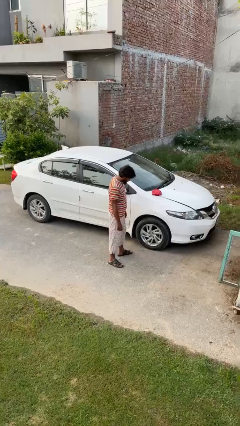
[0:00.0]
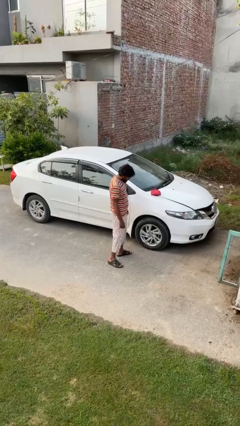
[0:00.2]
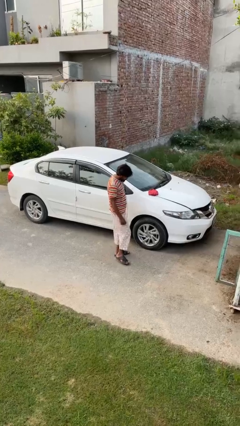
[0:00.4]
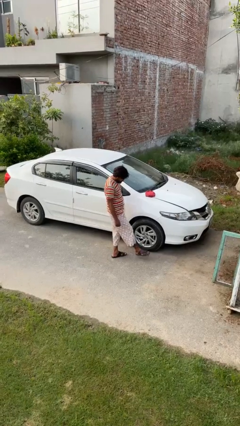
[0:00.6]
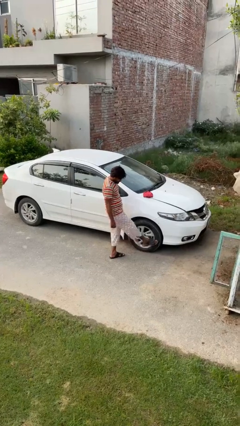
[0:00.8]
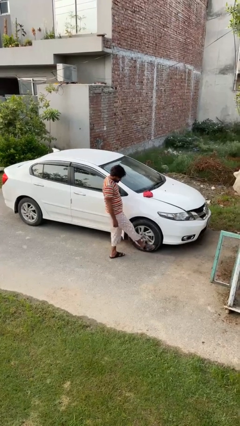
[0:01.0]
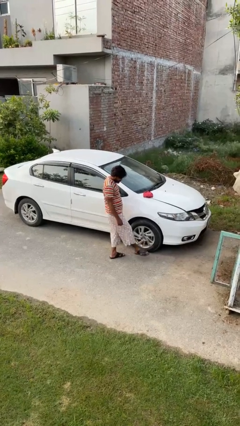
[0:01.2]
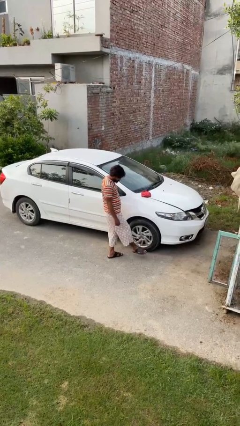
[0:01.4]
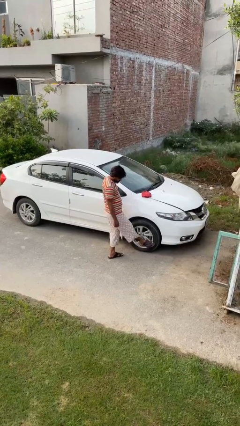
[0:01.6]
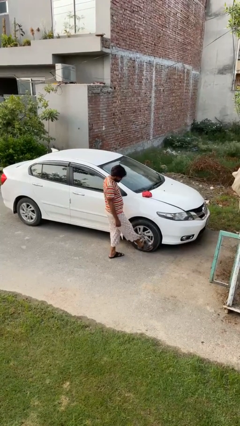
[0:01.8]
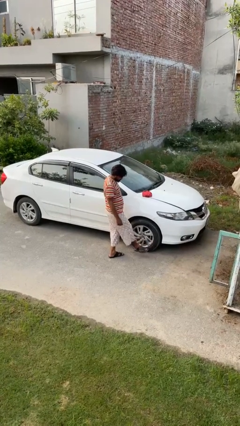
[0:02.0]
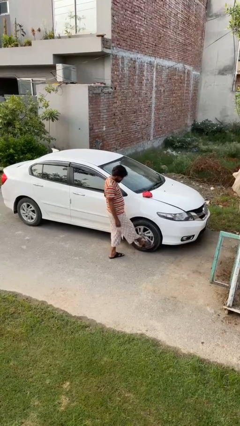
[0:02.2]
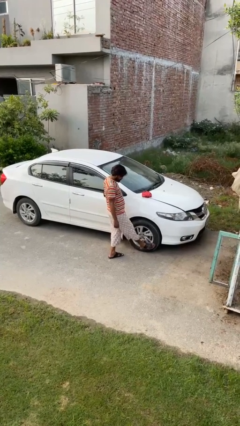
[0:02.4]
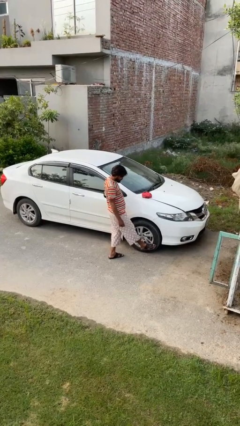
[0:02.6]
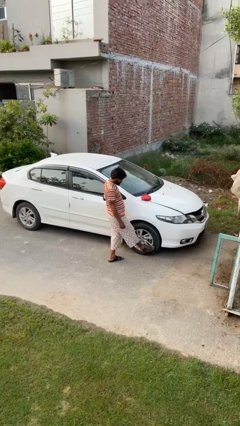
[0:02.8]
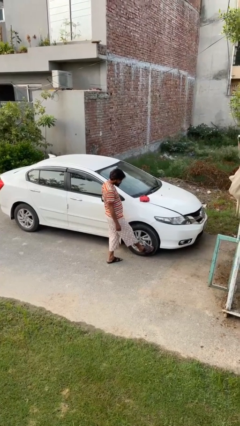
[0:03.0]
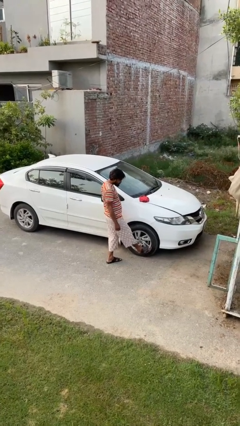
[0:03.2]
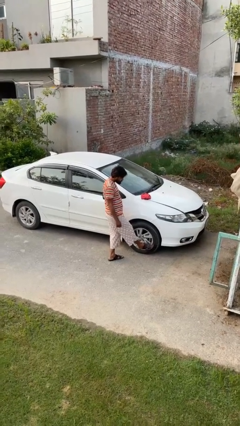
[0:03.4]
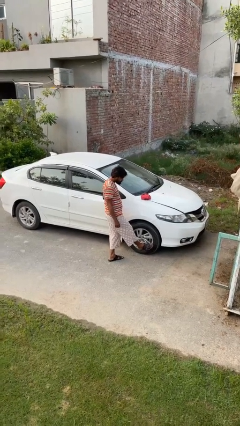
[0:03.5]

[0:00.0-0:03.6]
person kicks car tires

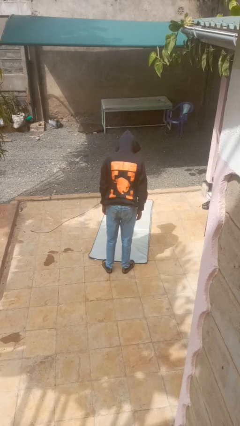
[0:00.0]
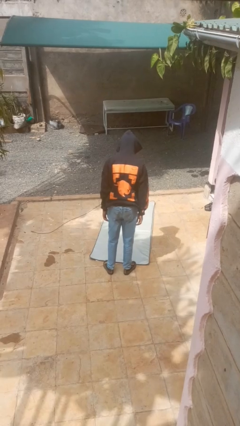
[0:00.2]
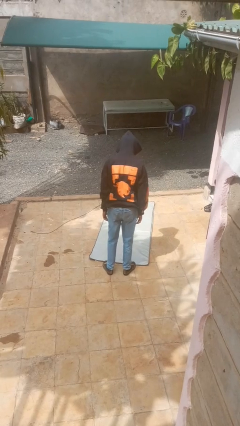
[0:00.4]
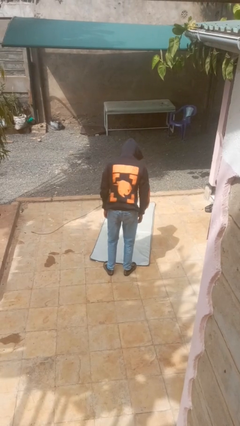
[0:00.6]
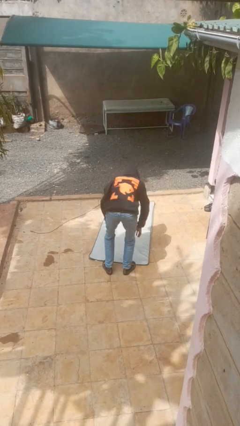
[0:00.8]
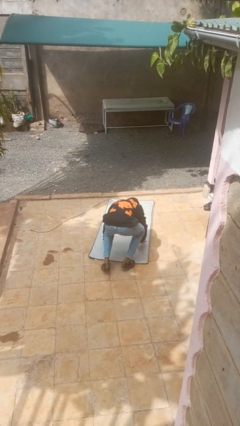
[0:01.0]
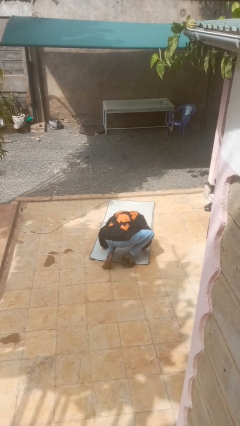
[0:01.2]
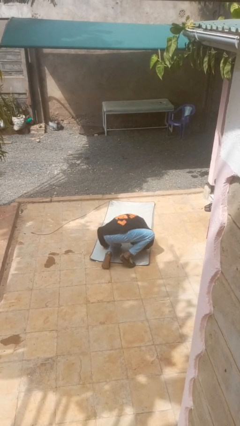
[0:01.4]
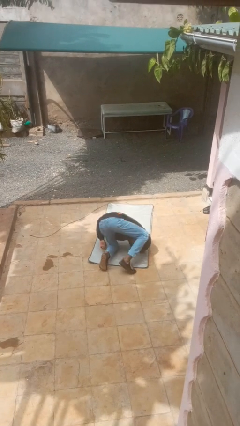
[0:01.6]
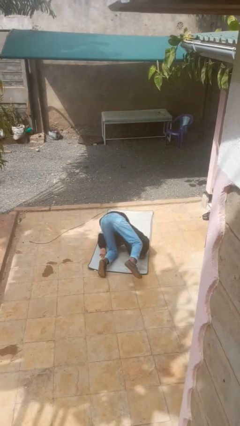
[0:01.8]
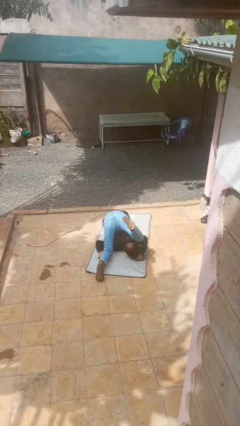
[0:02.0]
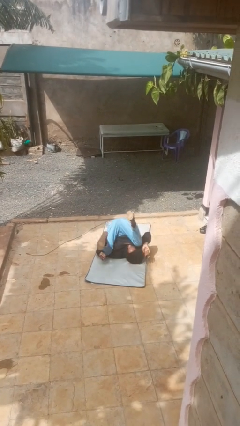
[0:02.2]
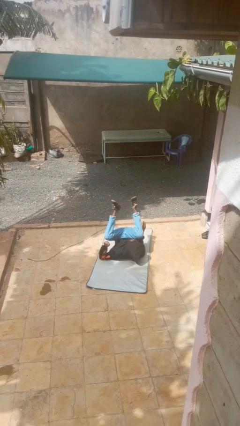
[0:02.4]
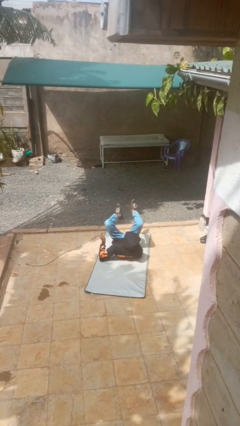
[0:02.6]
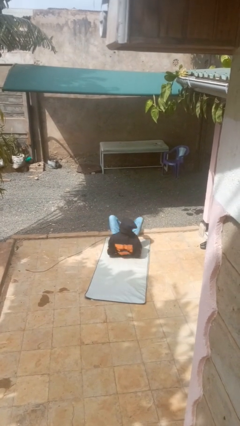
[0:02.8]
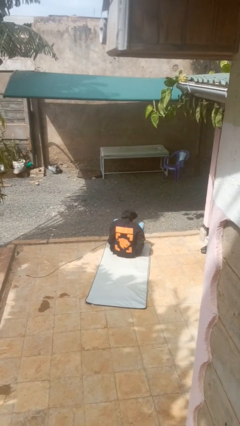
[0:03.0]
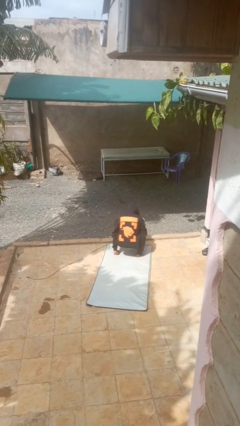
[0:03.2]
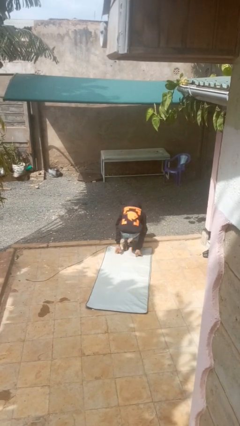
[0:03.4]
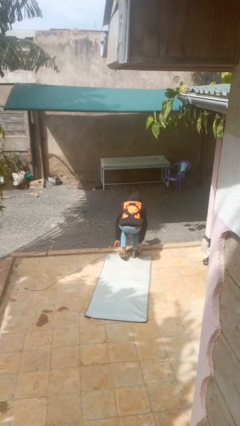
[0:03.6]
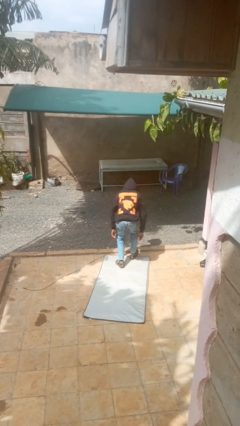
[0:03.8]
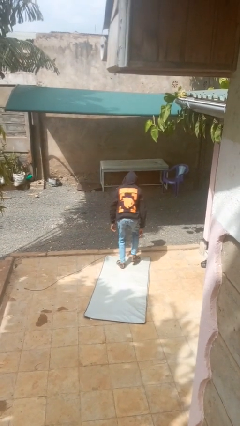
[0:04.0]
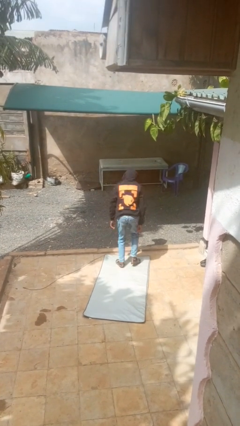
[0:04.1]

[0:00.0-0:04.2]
person somersaults

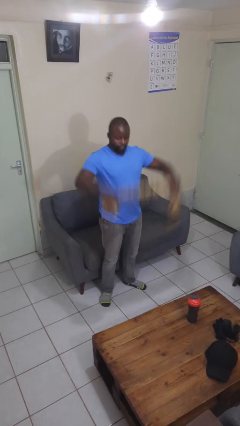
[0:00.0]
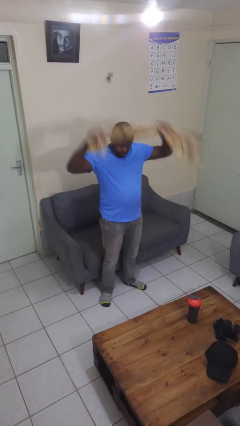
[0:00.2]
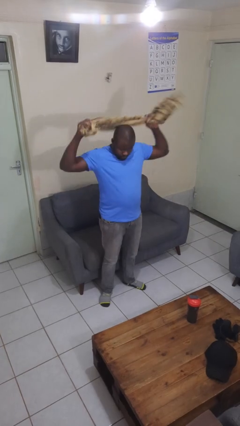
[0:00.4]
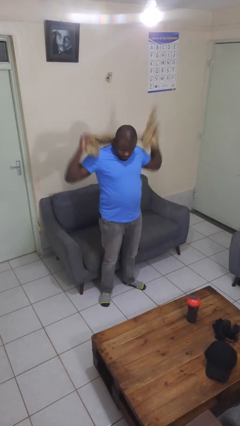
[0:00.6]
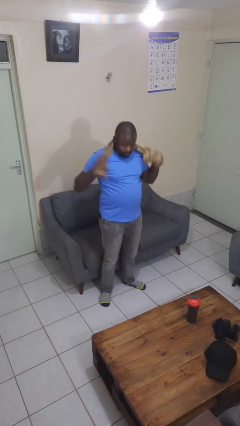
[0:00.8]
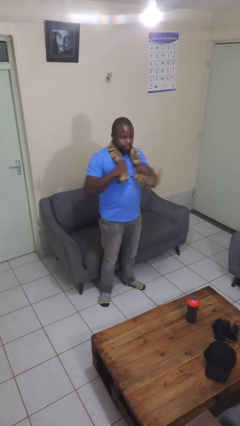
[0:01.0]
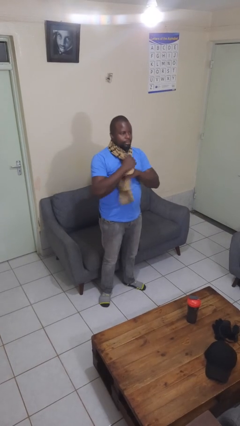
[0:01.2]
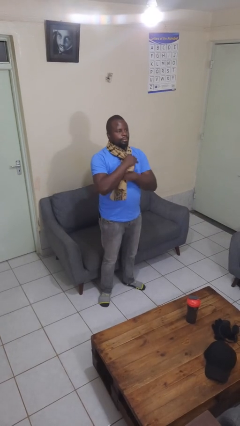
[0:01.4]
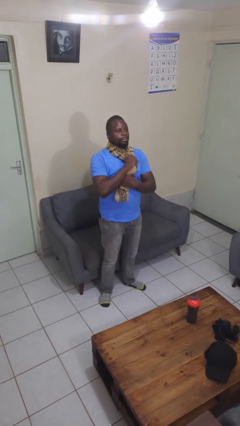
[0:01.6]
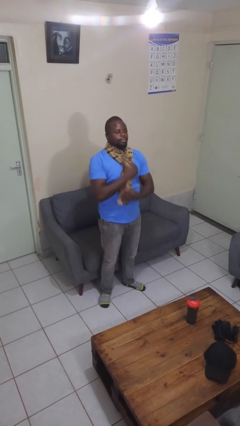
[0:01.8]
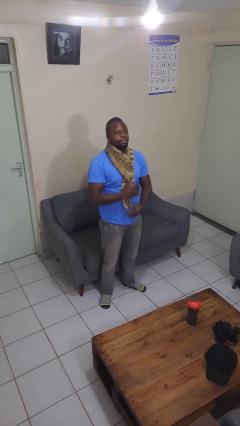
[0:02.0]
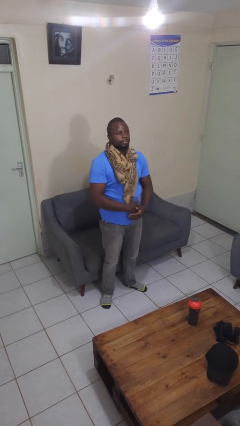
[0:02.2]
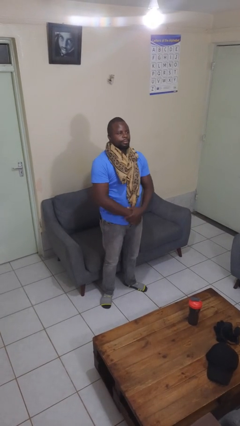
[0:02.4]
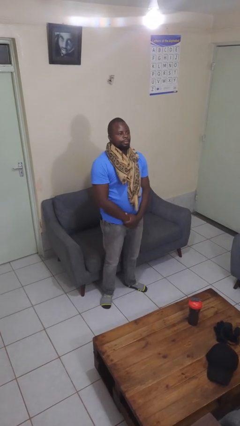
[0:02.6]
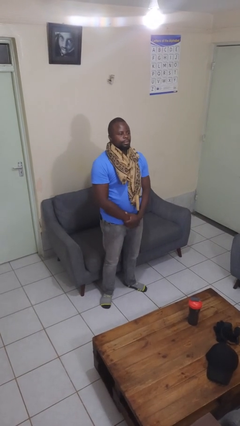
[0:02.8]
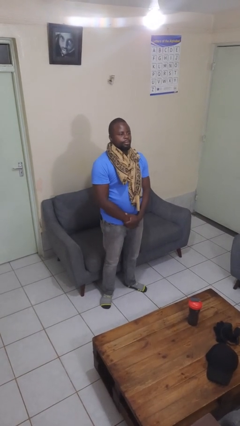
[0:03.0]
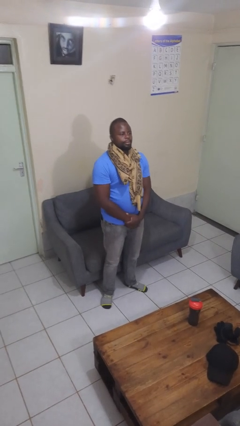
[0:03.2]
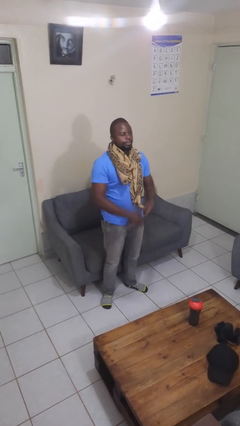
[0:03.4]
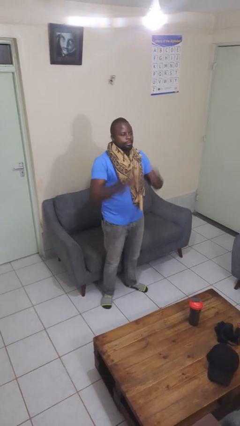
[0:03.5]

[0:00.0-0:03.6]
person puts on scarf

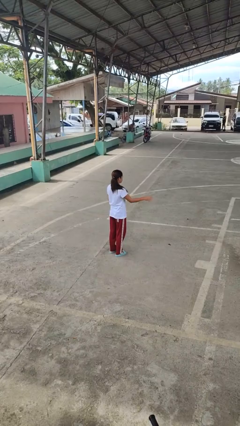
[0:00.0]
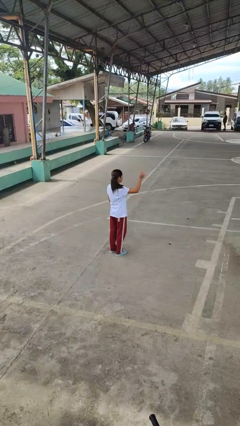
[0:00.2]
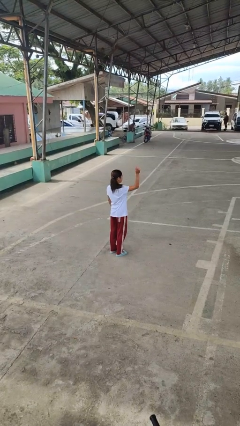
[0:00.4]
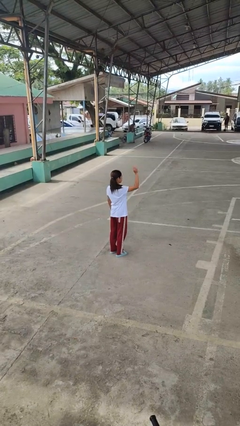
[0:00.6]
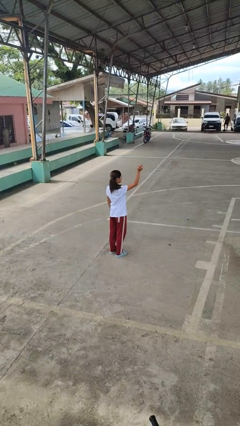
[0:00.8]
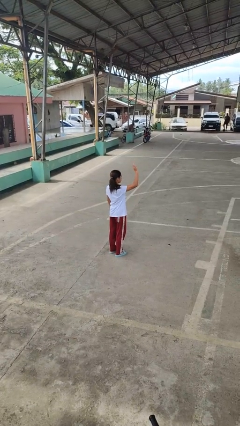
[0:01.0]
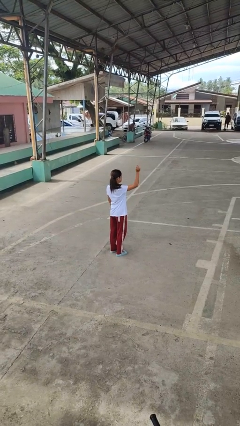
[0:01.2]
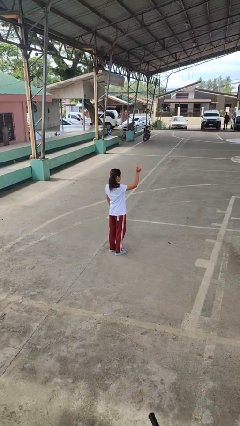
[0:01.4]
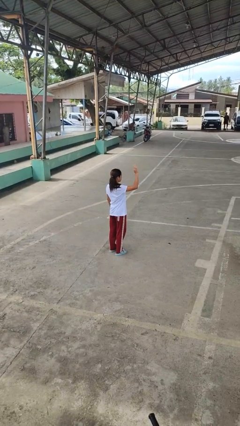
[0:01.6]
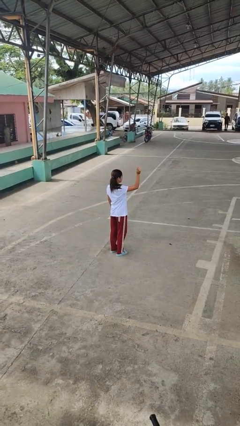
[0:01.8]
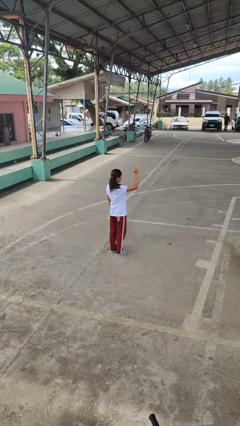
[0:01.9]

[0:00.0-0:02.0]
person waves at person

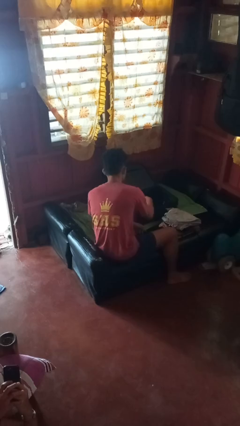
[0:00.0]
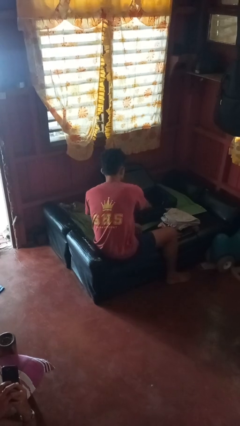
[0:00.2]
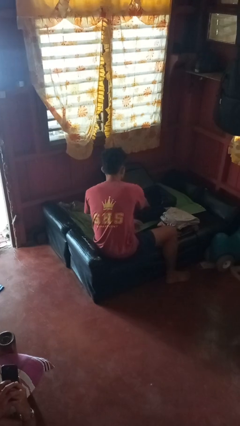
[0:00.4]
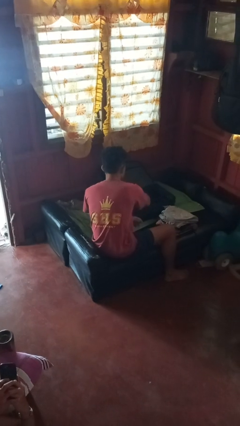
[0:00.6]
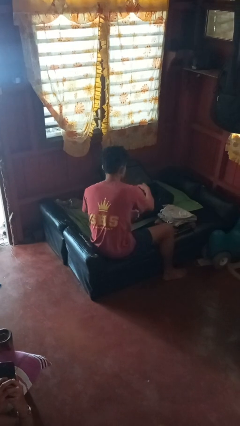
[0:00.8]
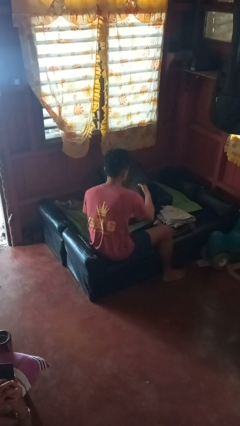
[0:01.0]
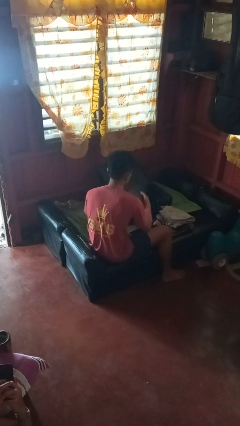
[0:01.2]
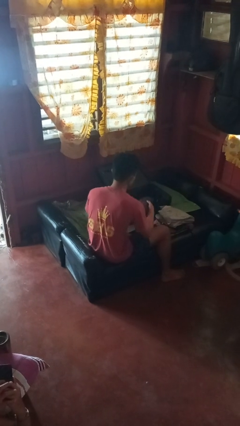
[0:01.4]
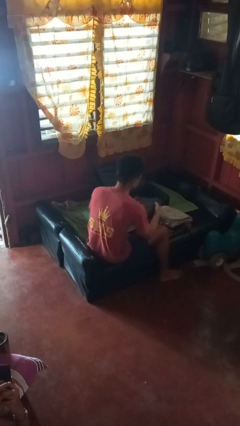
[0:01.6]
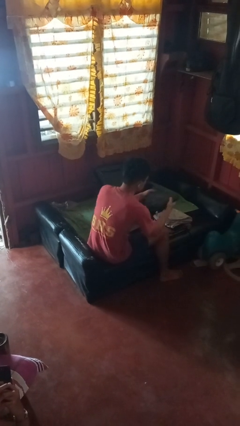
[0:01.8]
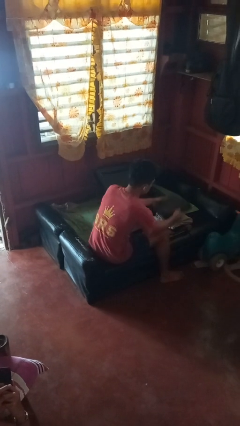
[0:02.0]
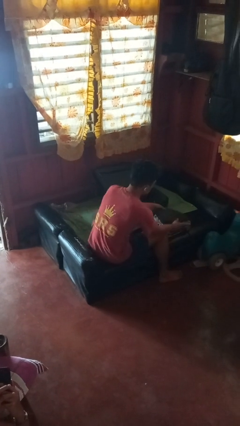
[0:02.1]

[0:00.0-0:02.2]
person unloads clothes from suitcase

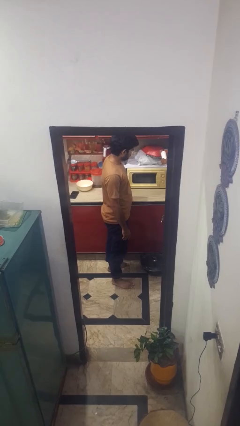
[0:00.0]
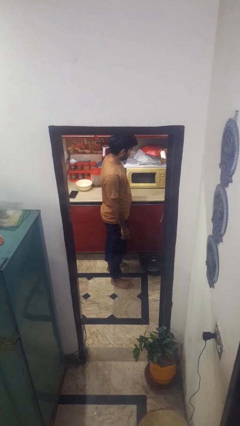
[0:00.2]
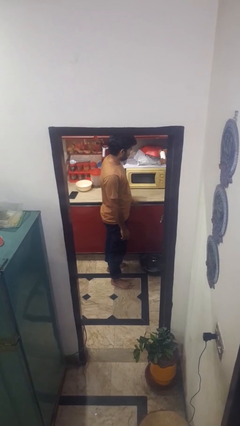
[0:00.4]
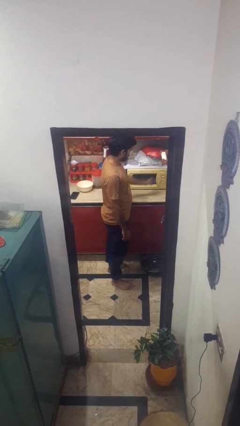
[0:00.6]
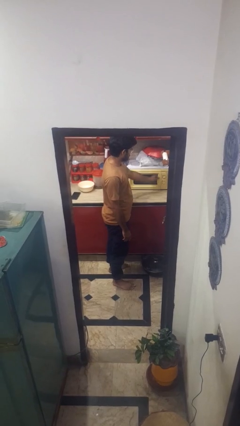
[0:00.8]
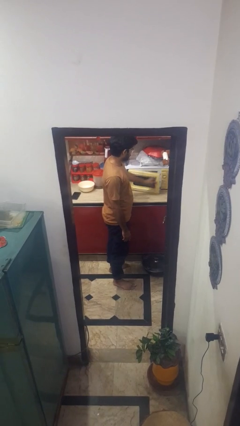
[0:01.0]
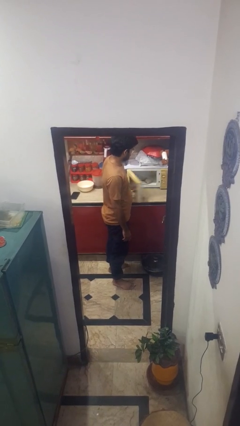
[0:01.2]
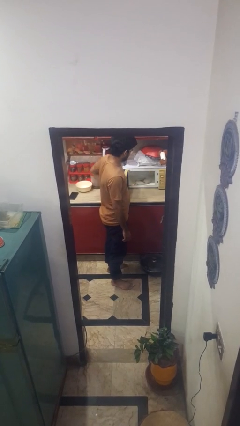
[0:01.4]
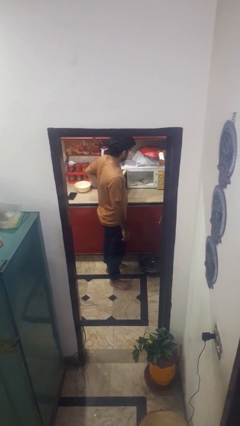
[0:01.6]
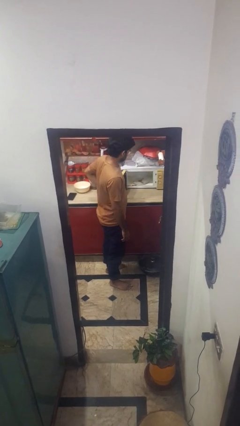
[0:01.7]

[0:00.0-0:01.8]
person opens microwave
